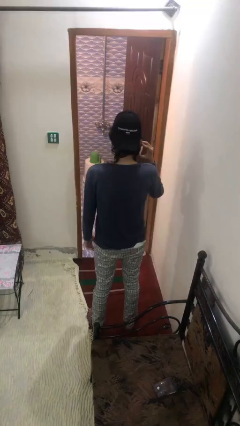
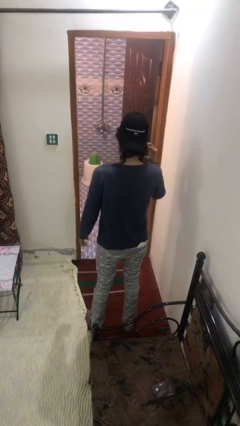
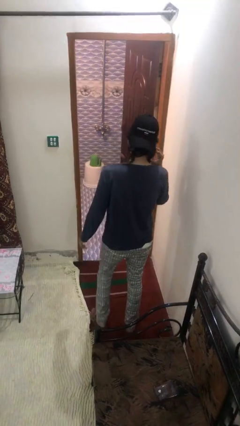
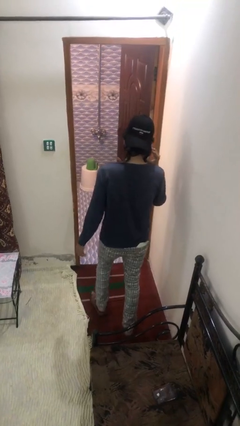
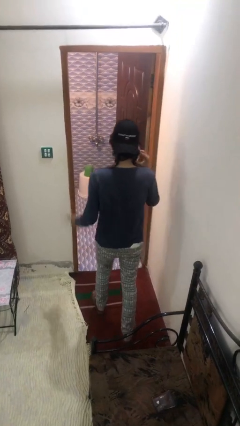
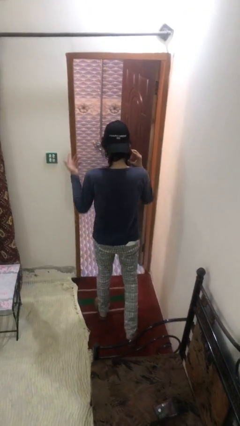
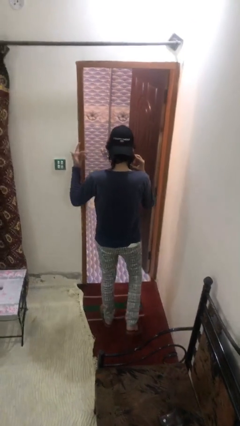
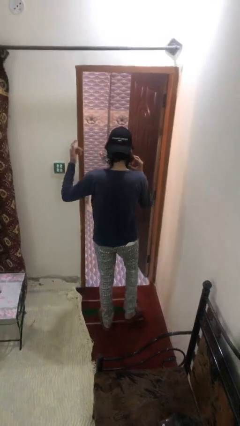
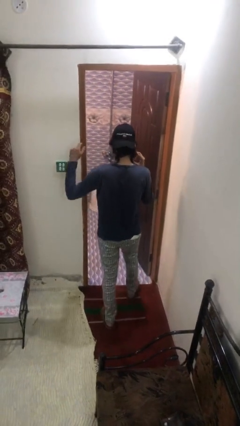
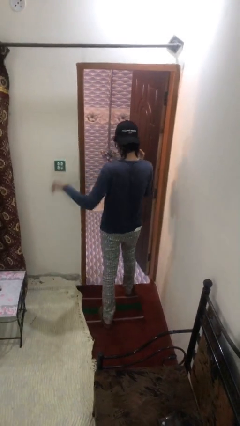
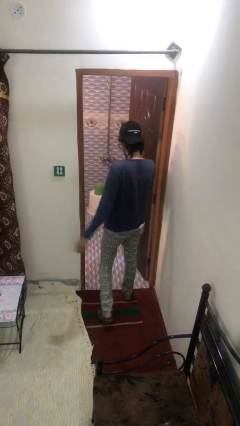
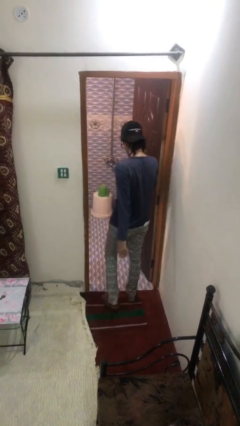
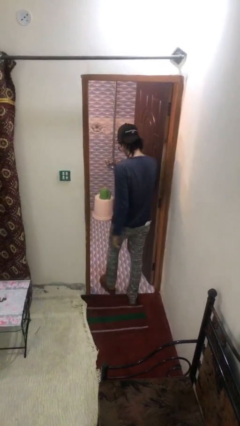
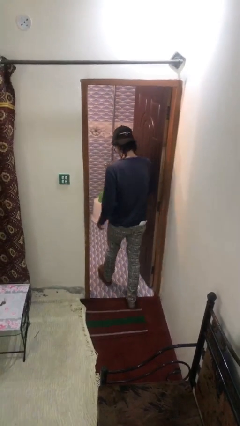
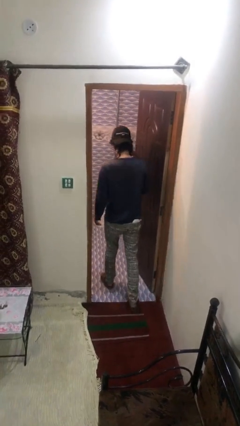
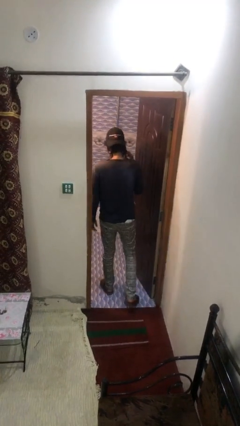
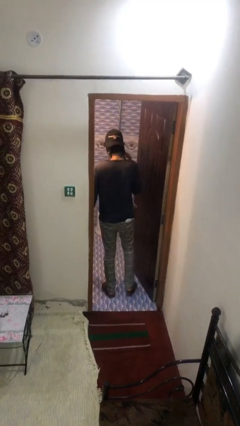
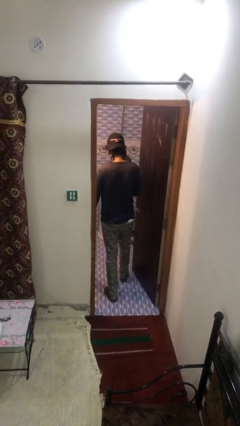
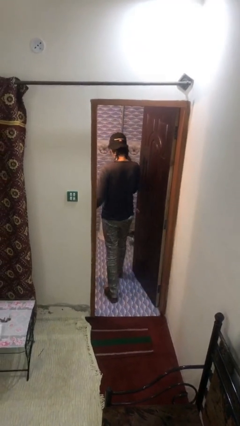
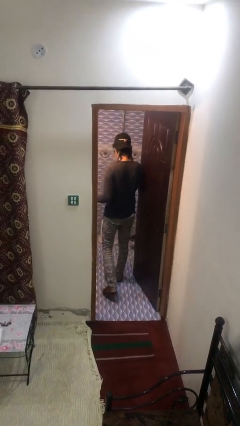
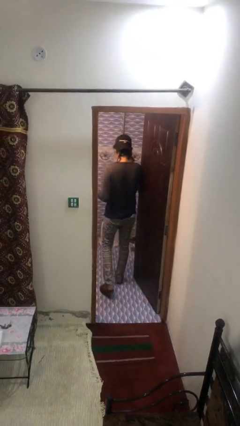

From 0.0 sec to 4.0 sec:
person exits scene through structure

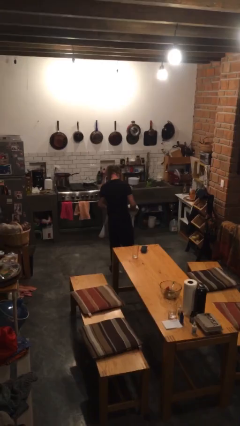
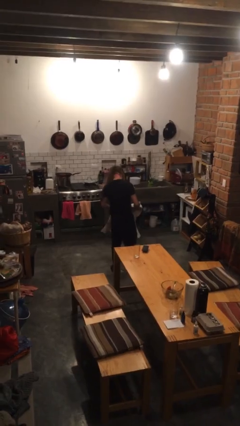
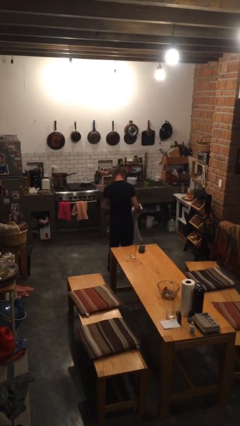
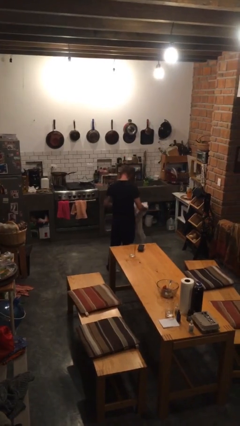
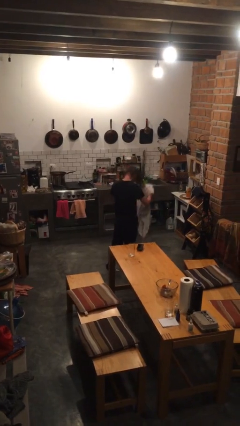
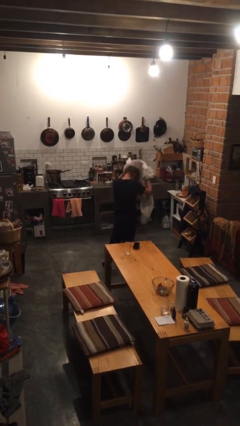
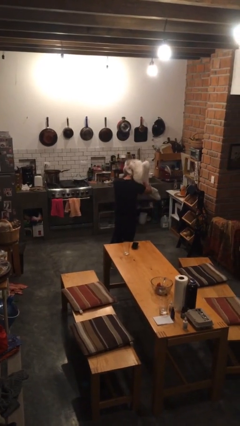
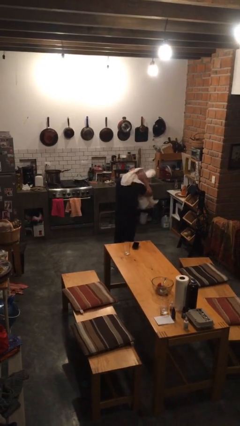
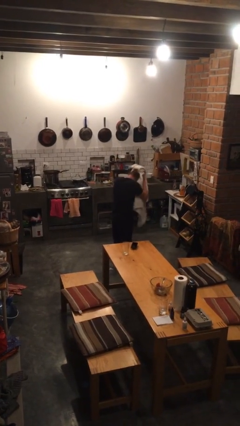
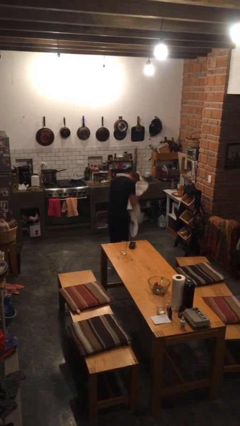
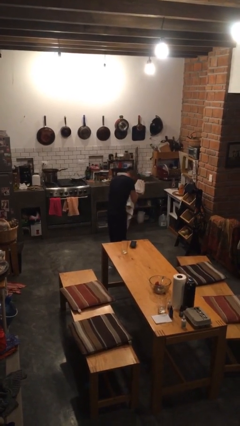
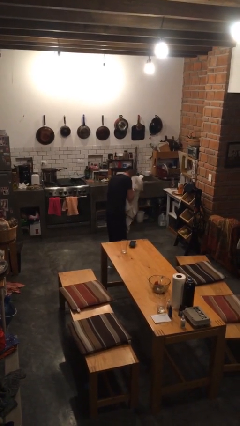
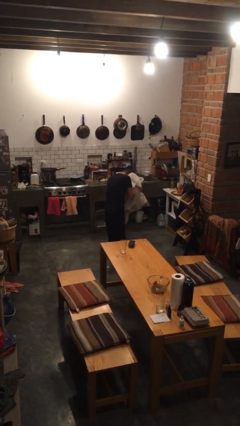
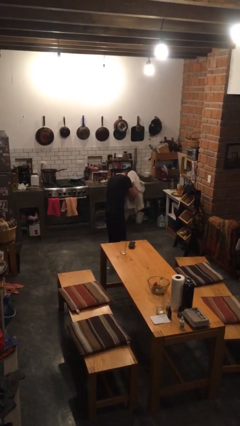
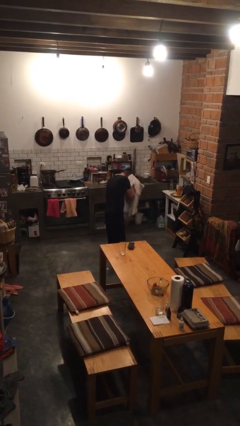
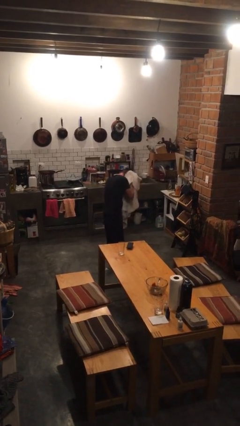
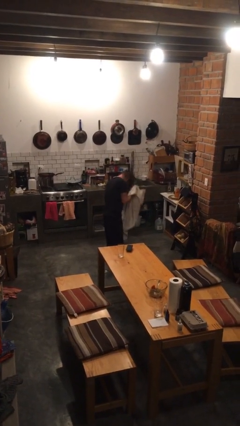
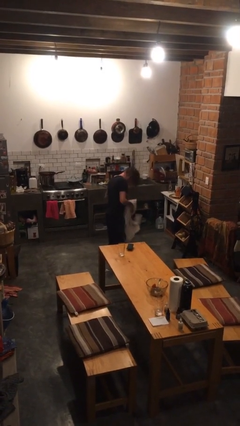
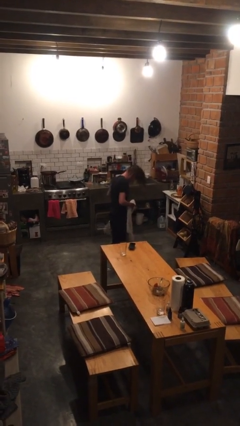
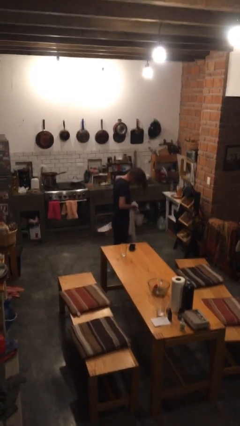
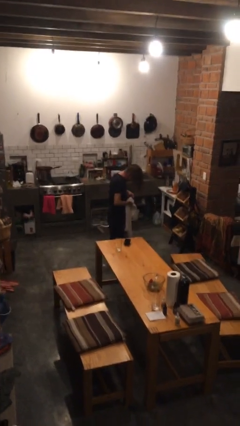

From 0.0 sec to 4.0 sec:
person dries hair with towel

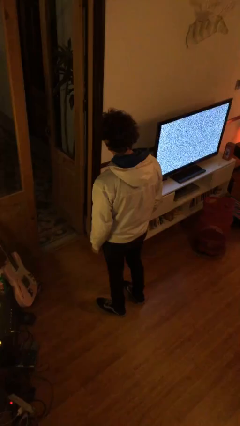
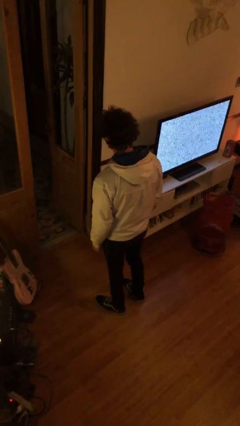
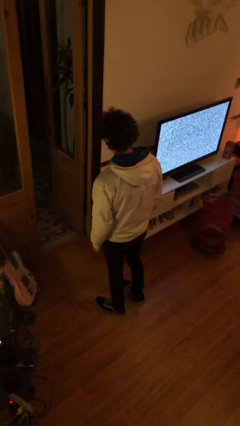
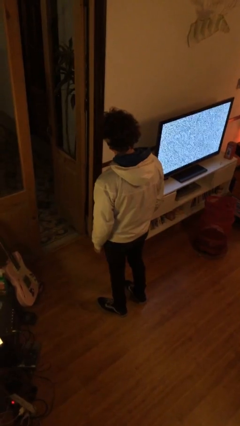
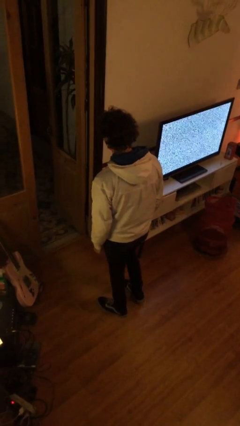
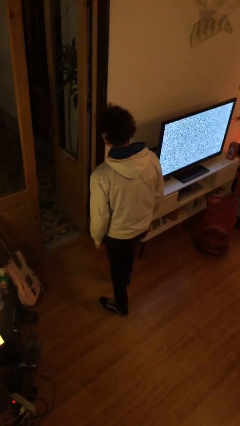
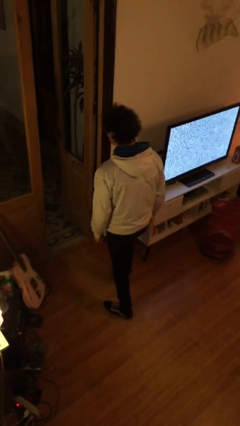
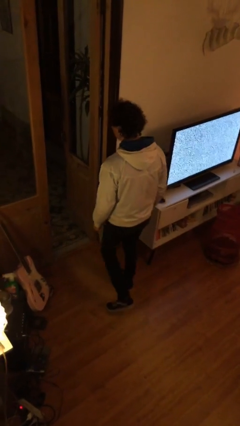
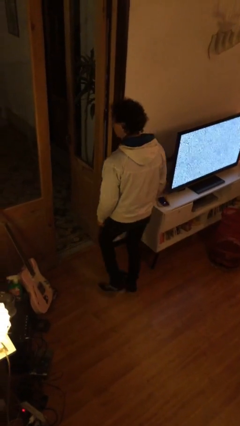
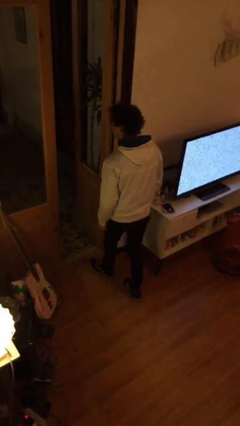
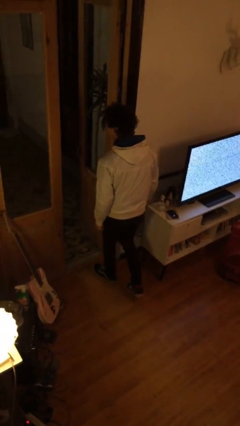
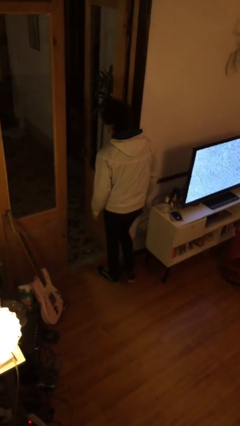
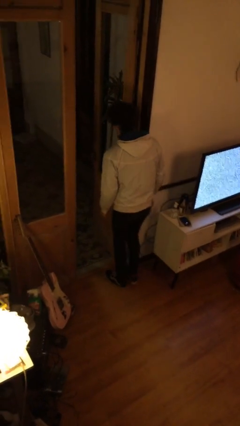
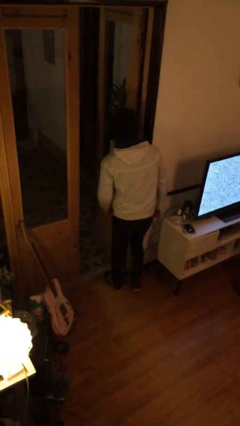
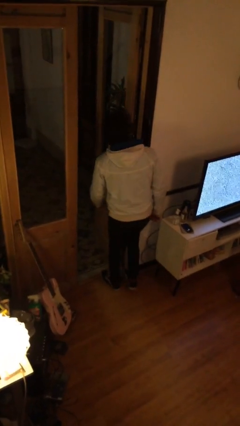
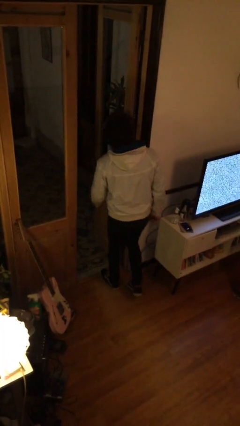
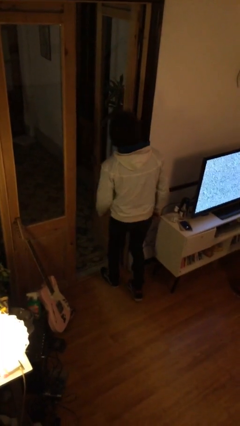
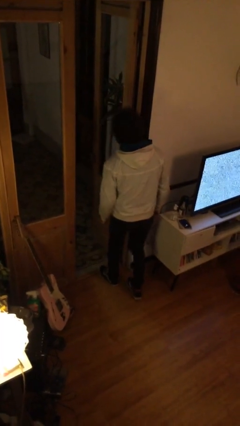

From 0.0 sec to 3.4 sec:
person bumps into wall

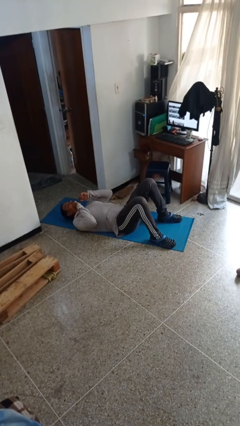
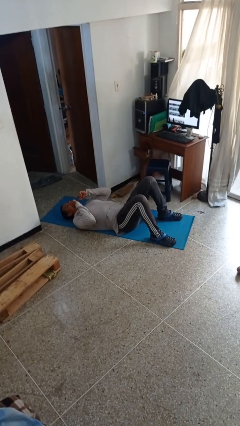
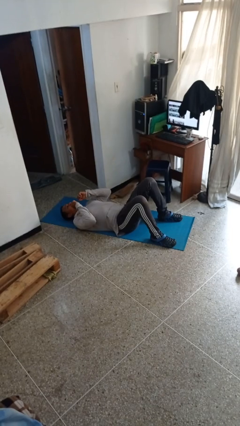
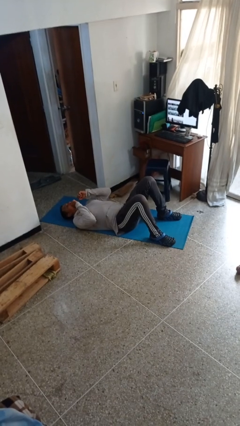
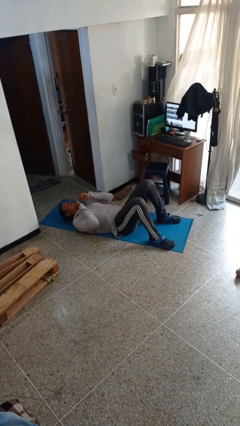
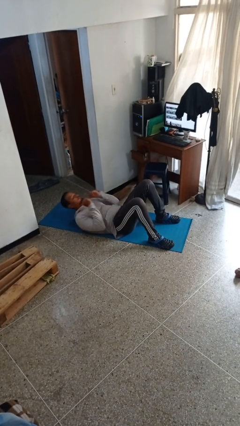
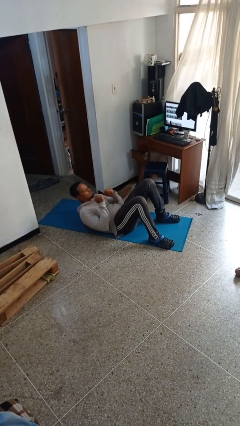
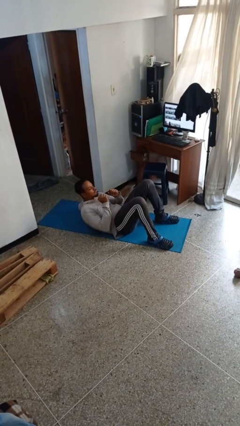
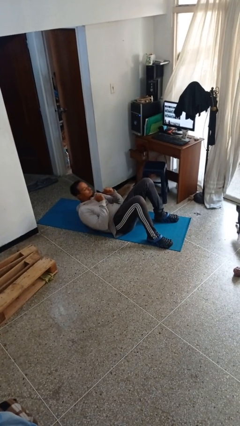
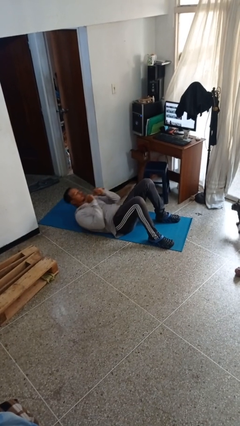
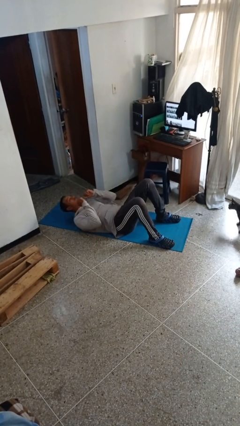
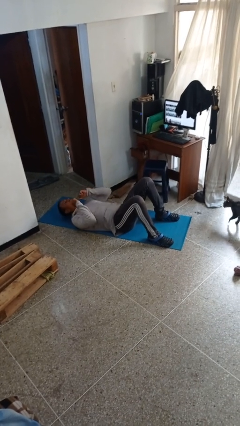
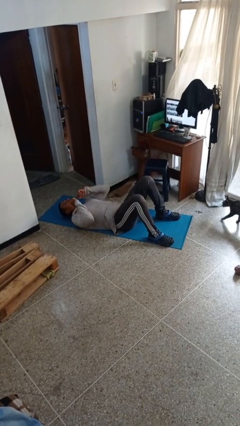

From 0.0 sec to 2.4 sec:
person exercises with situp

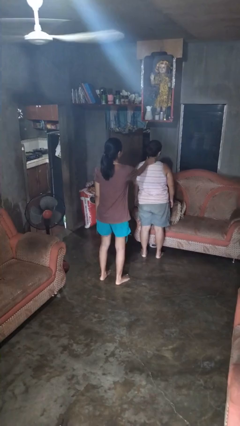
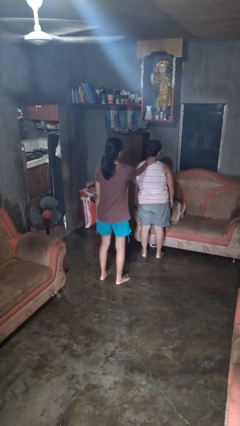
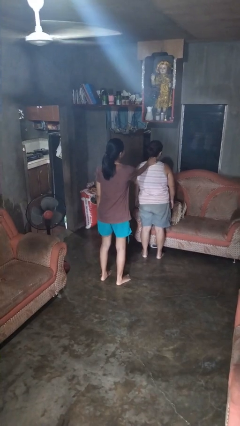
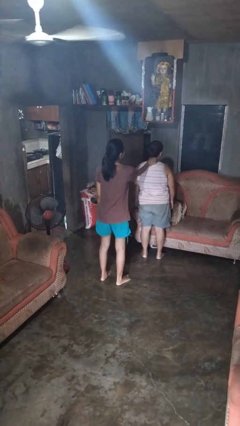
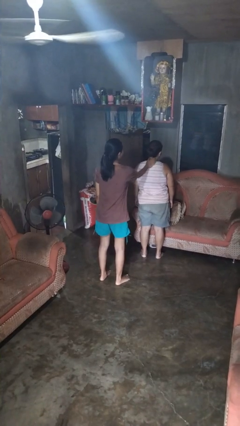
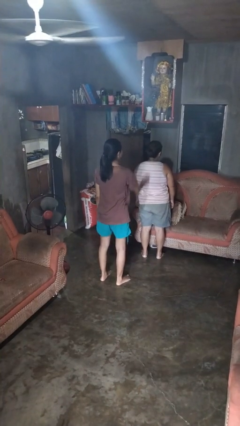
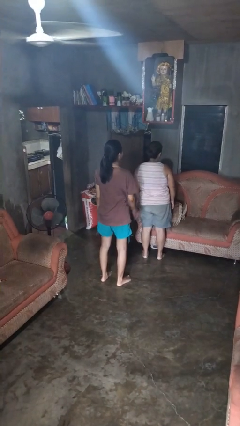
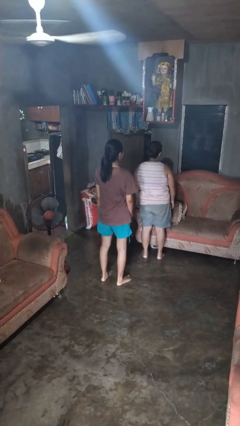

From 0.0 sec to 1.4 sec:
person tickles person

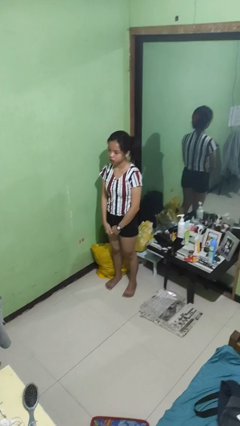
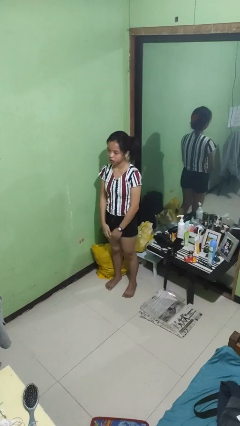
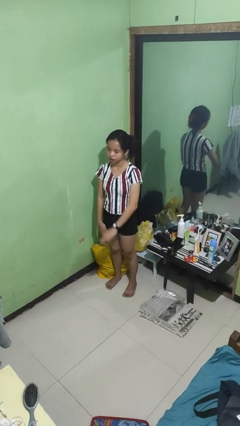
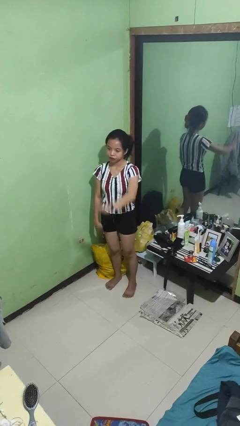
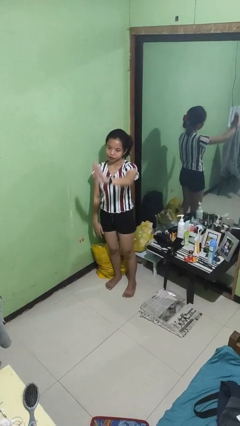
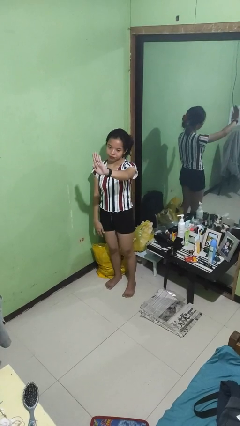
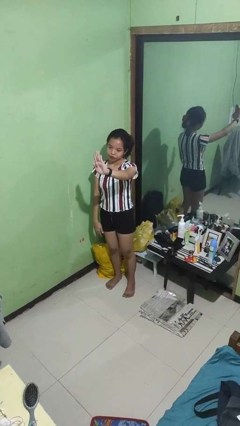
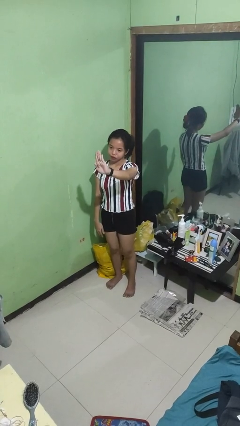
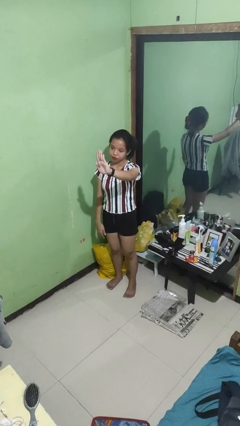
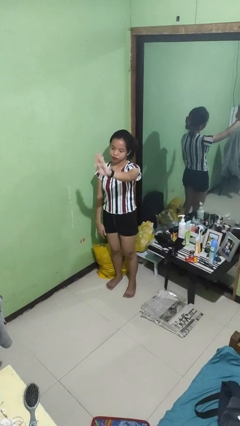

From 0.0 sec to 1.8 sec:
person gestures stop

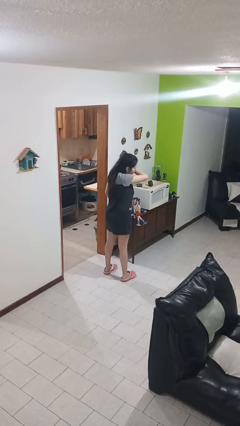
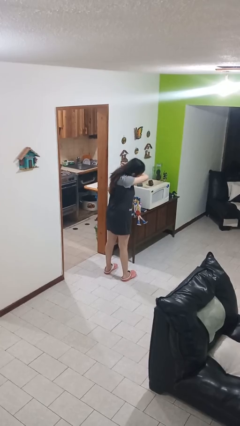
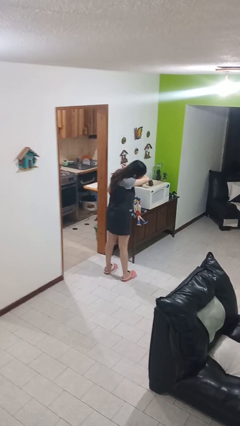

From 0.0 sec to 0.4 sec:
person sneezes into arm

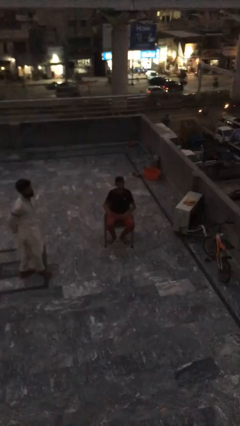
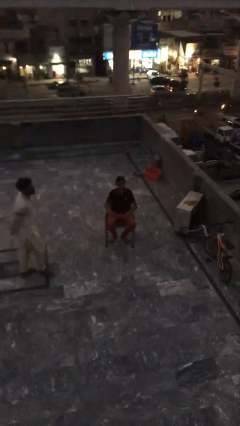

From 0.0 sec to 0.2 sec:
person shakes hand
